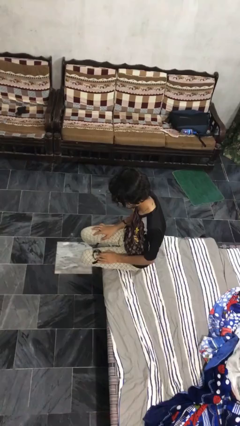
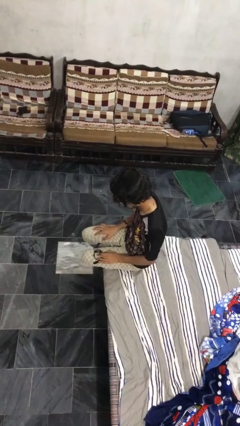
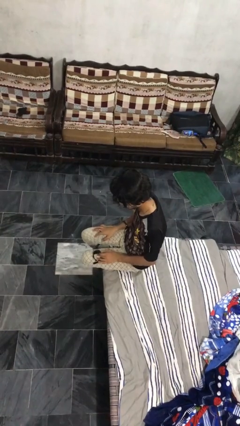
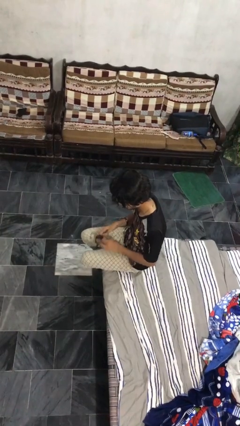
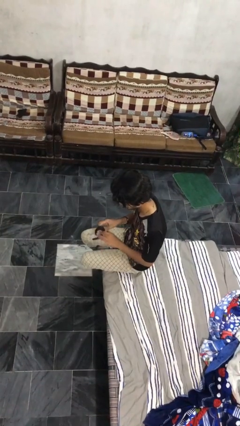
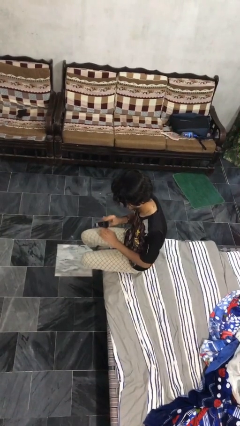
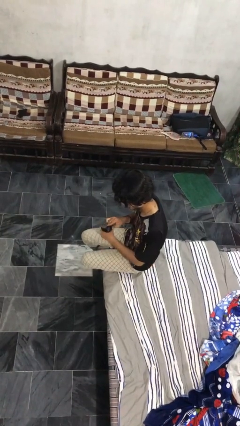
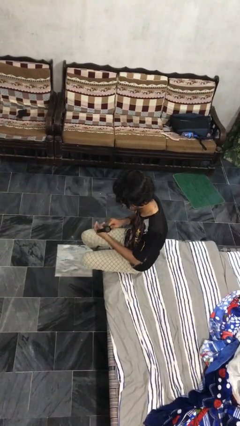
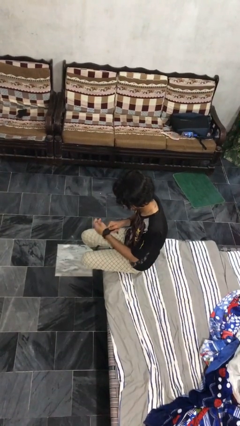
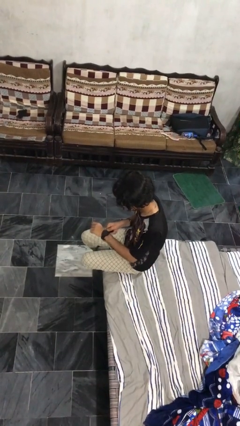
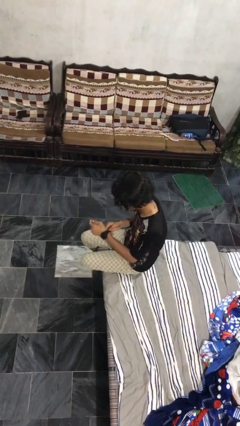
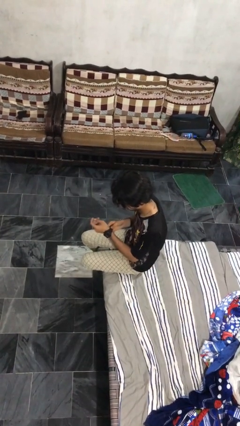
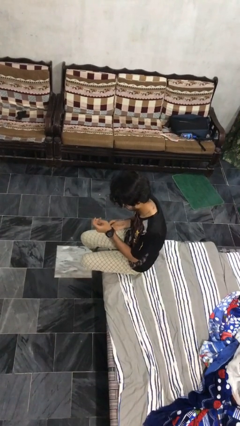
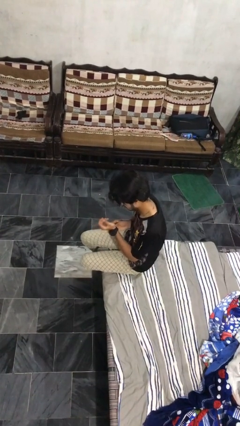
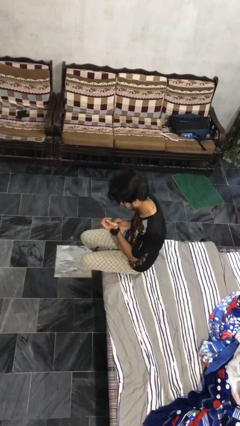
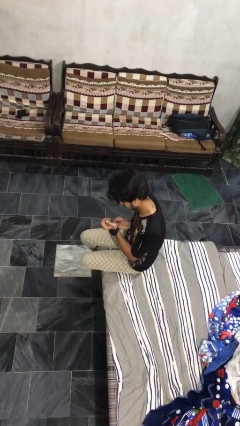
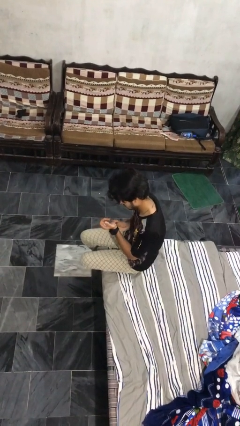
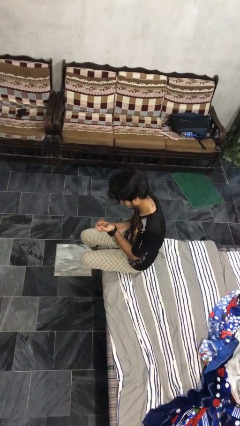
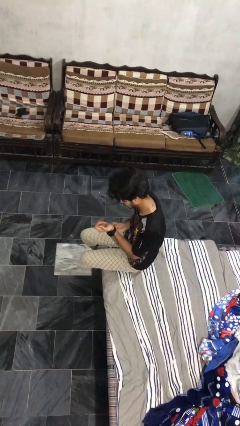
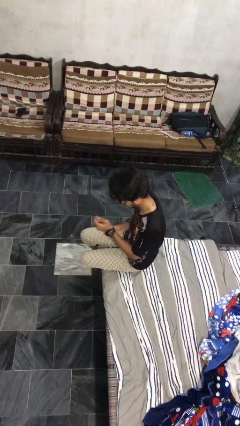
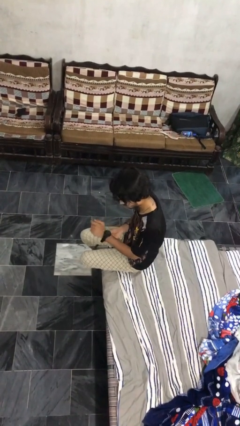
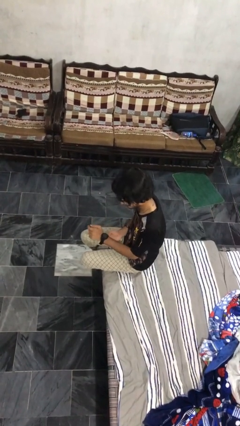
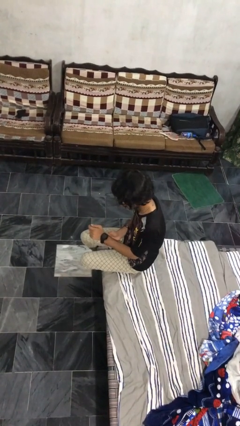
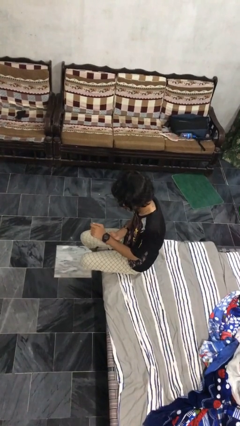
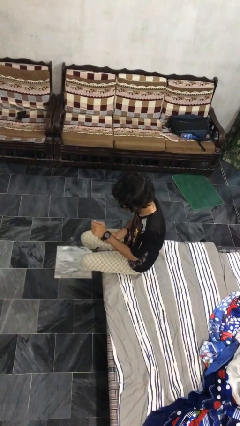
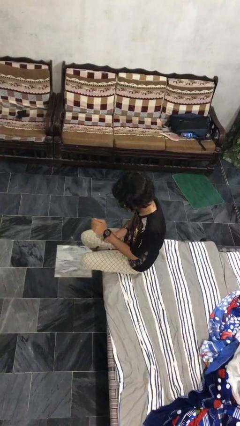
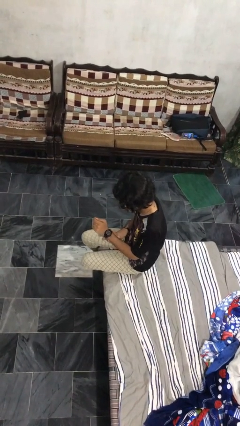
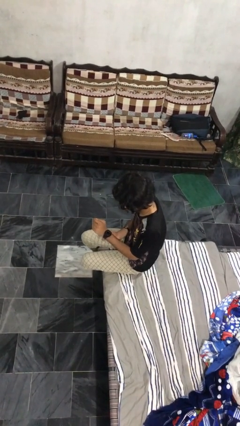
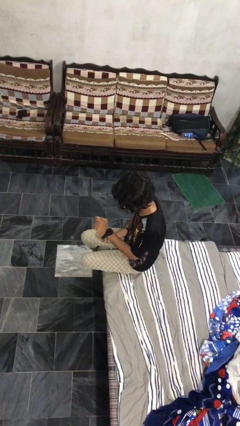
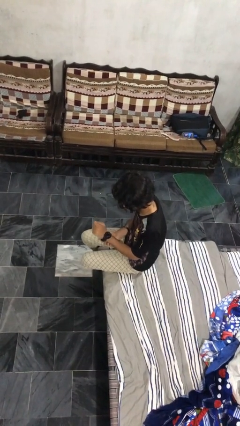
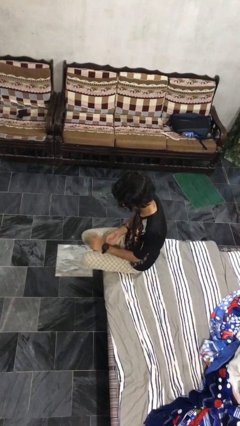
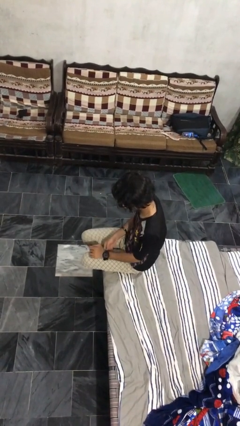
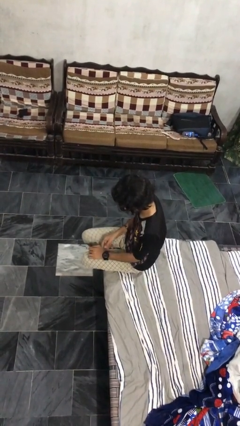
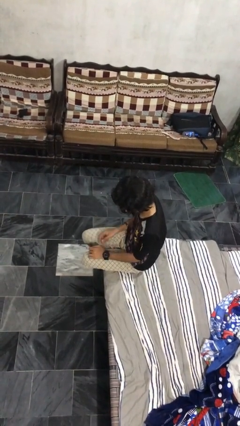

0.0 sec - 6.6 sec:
person puts on wristwatch

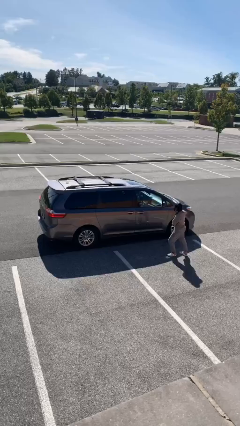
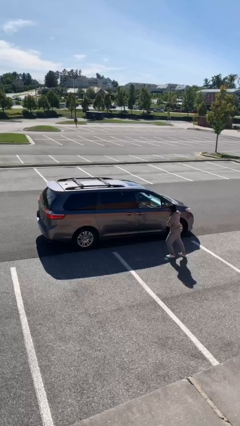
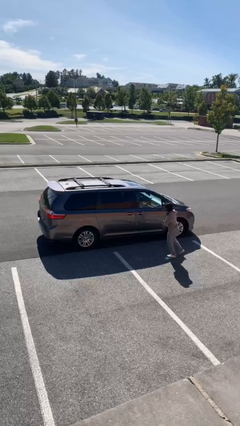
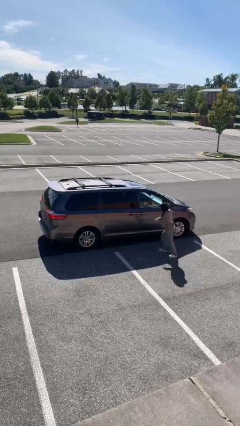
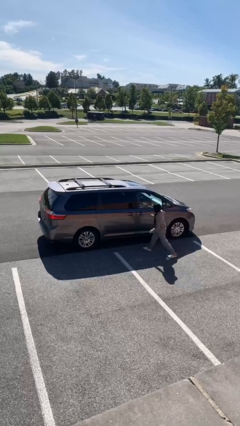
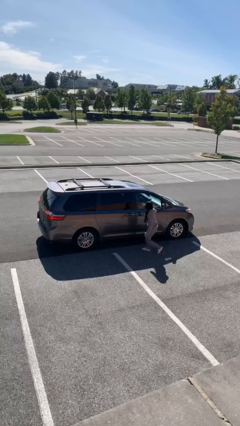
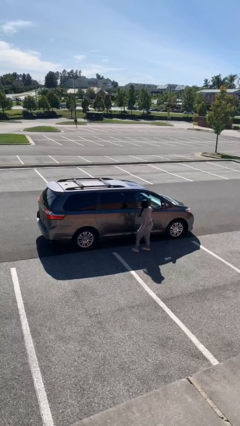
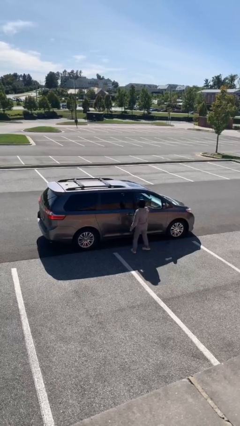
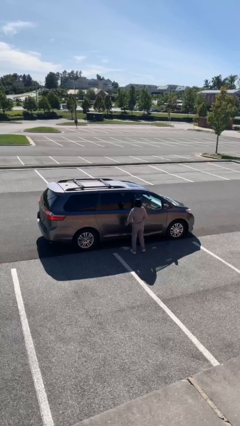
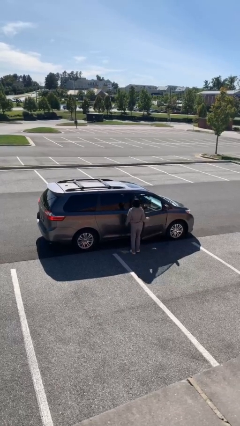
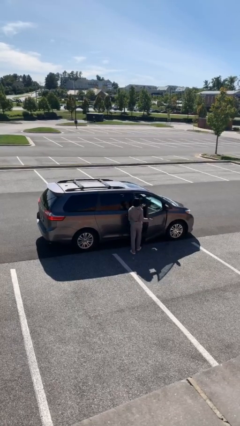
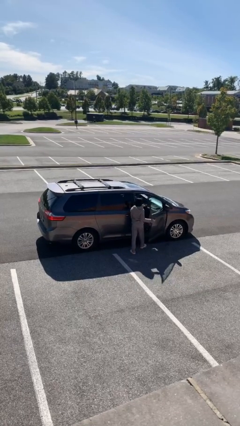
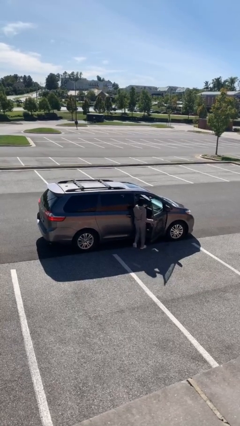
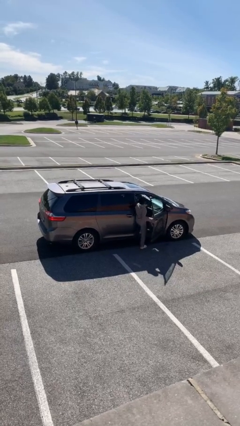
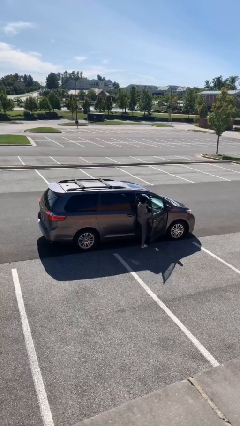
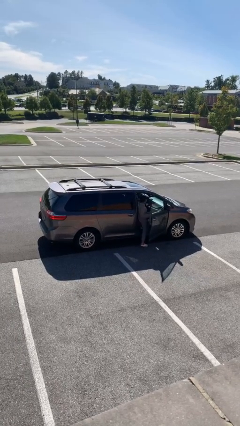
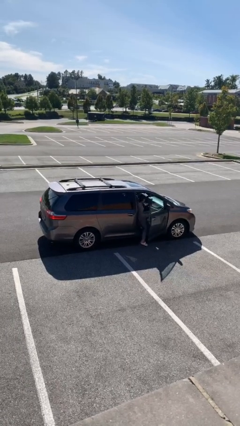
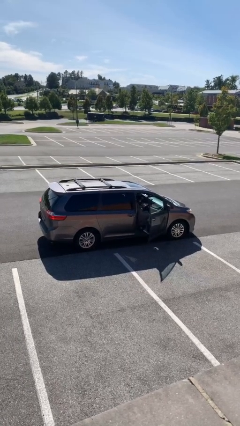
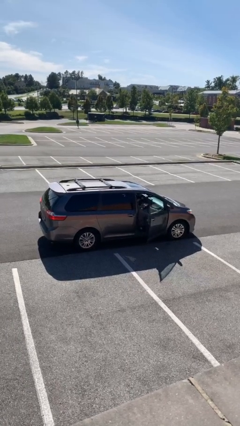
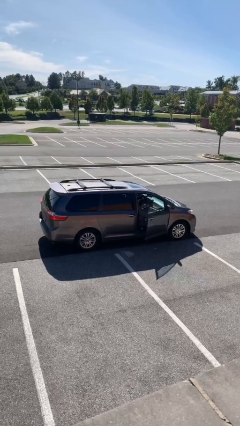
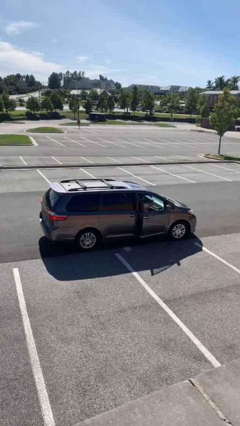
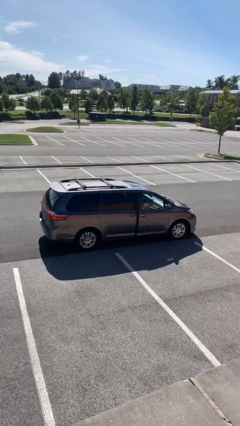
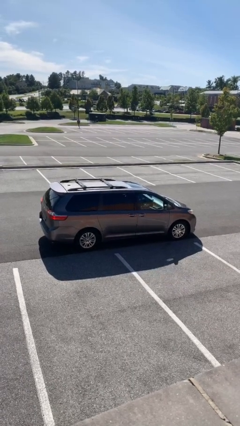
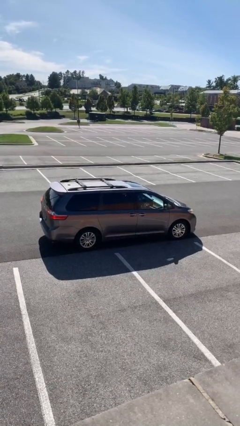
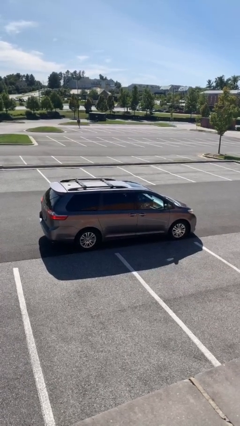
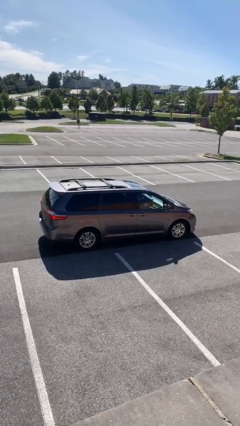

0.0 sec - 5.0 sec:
car picks up person

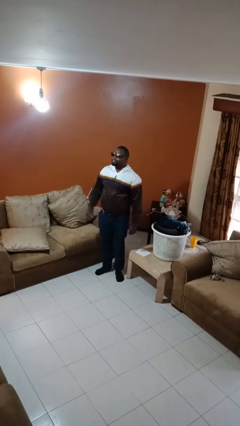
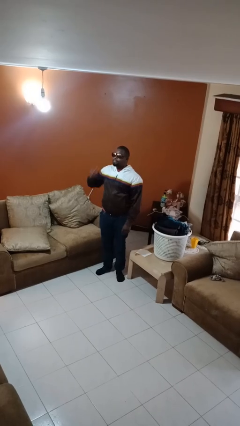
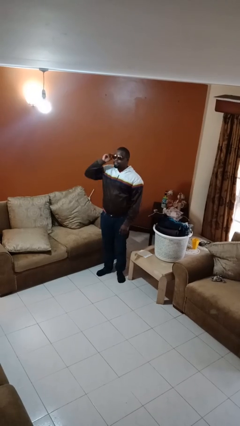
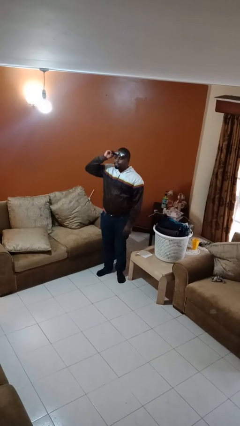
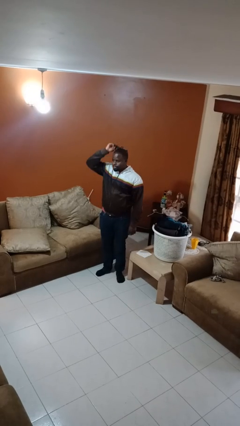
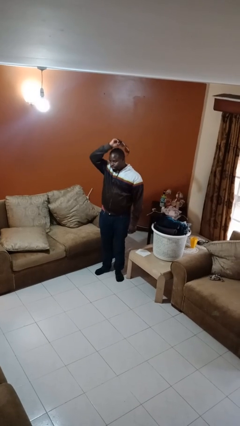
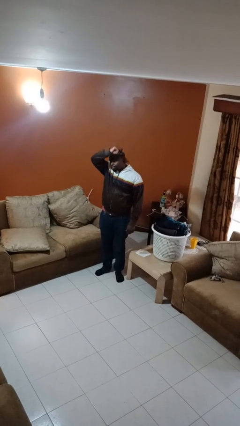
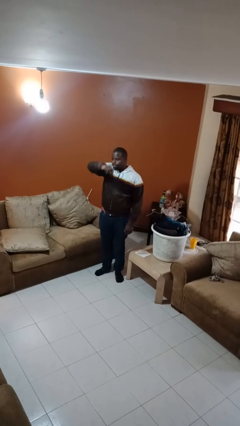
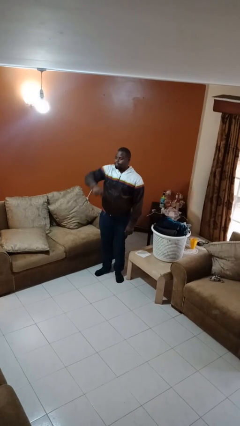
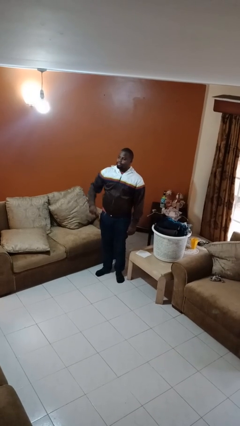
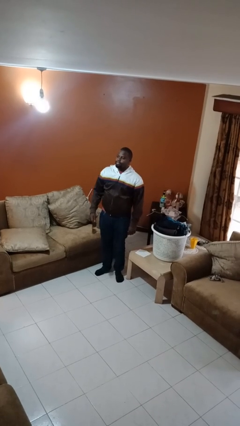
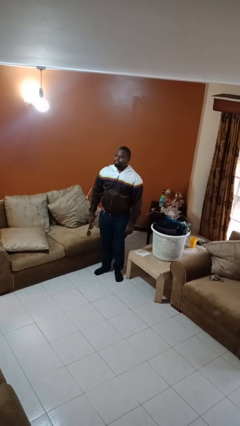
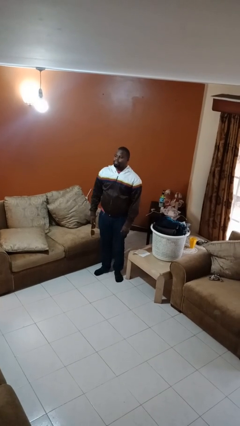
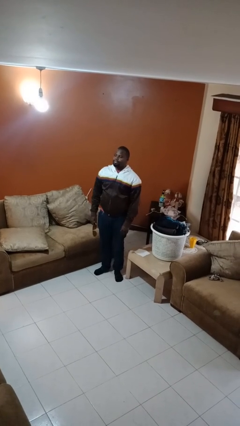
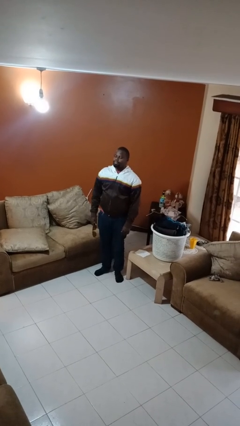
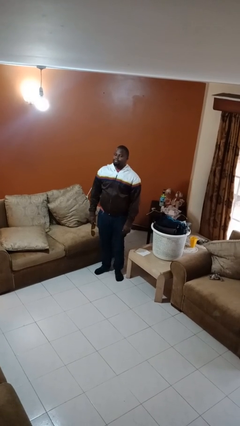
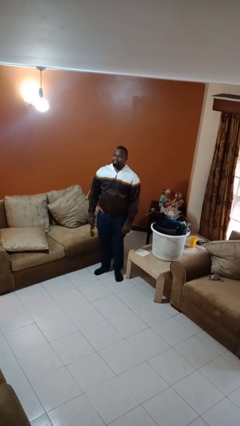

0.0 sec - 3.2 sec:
person takes off sunglasses

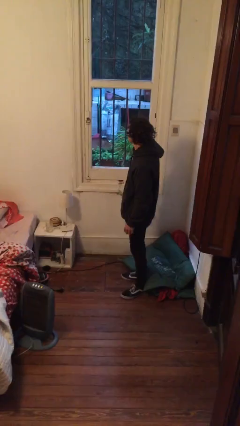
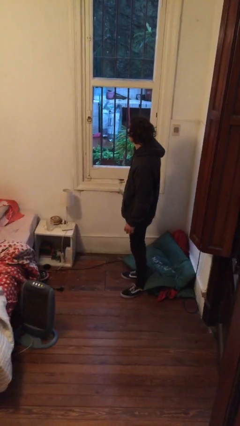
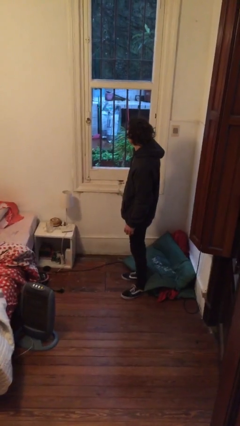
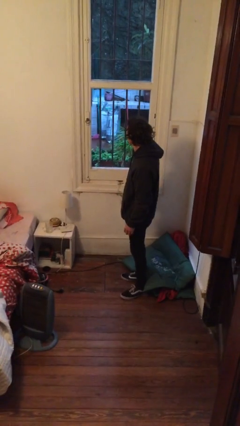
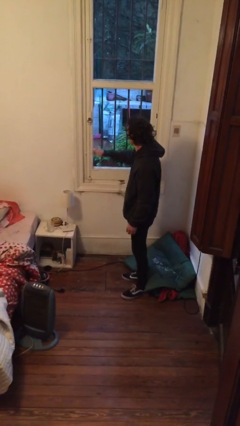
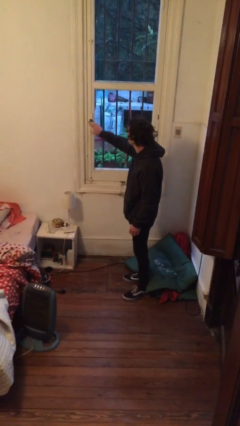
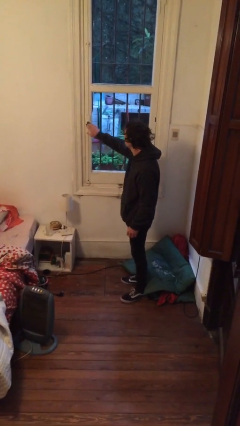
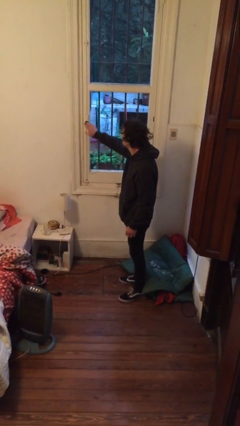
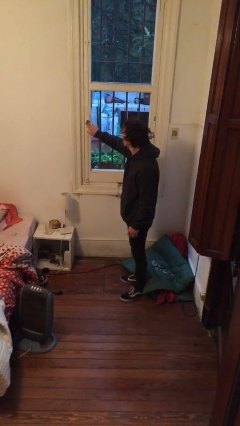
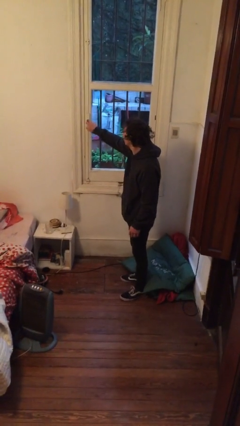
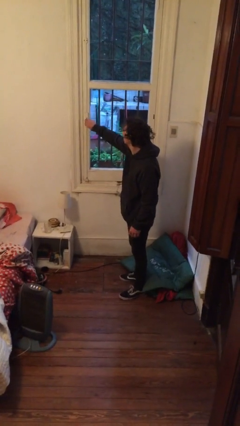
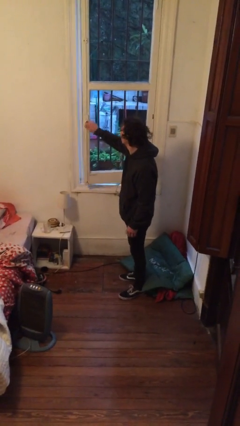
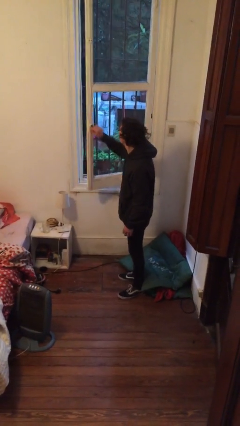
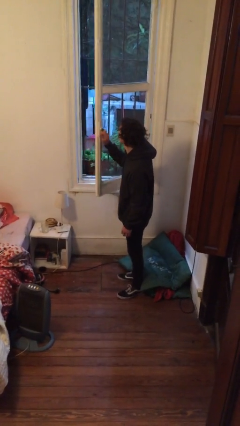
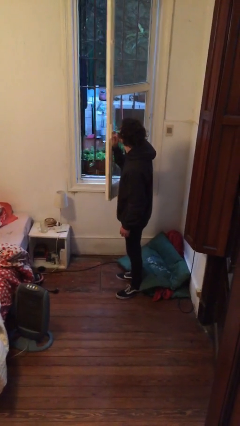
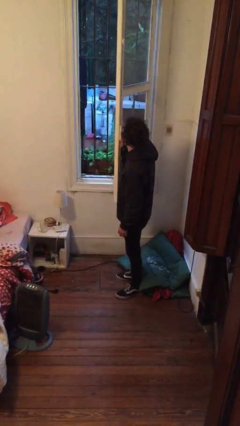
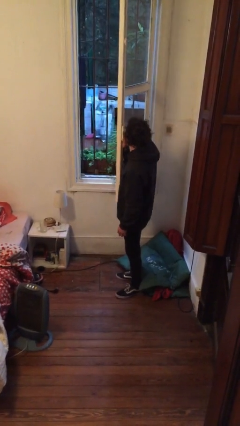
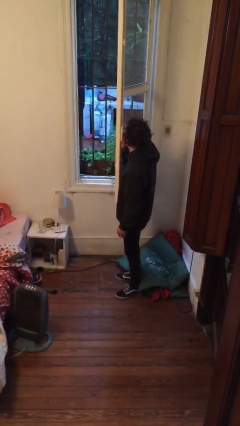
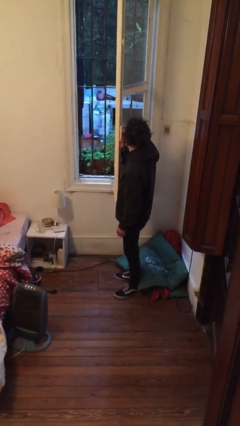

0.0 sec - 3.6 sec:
person opens home window
